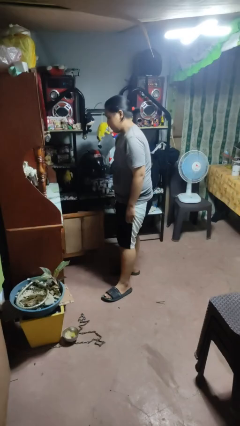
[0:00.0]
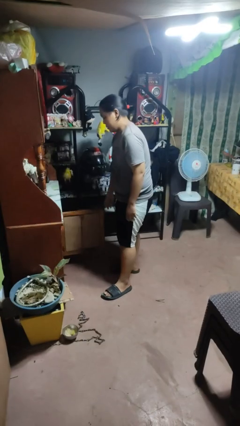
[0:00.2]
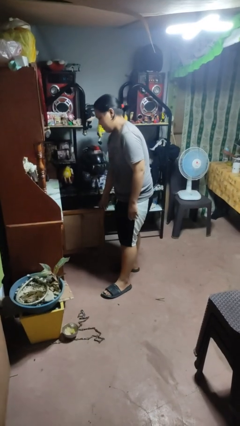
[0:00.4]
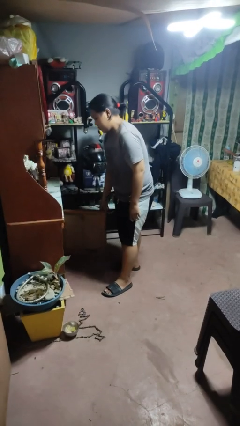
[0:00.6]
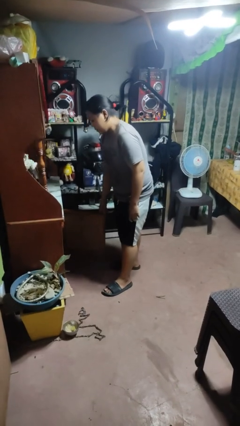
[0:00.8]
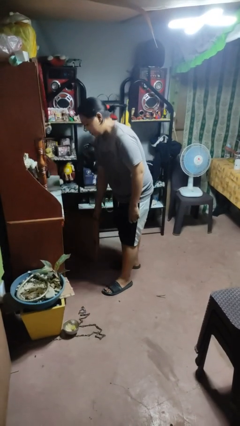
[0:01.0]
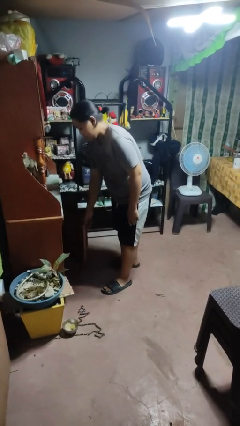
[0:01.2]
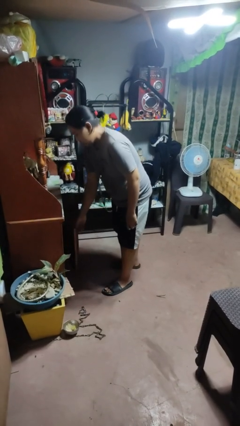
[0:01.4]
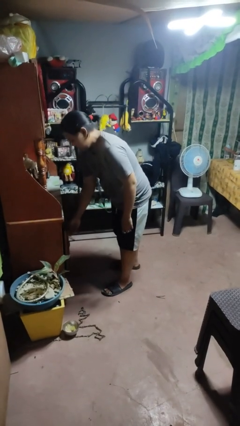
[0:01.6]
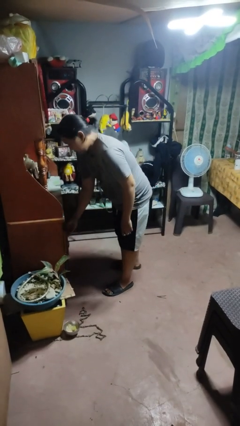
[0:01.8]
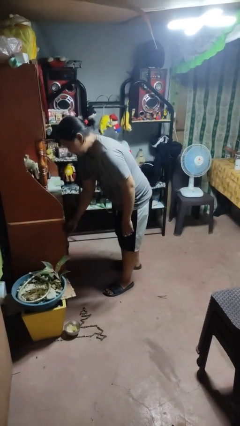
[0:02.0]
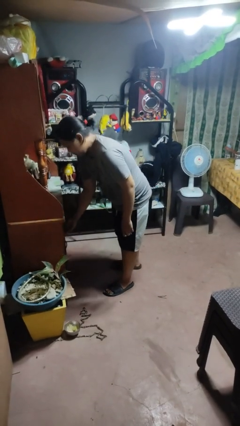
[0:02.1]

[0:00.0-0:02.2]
person closes cabinet

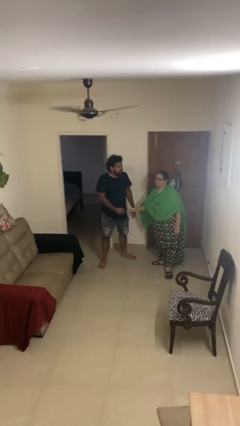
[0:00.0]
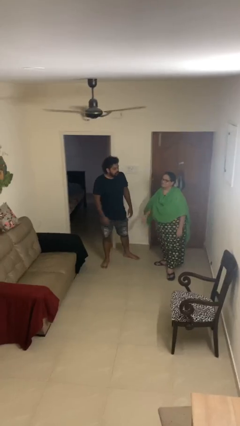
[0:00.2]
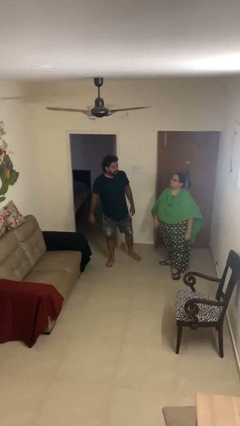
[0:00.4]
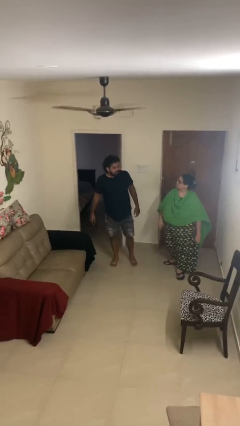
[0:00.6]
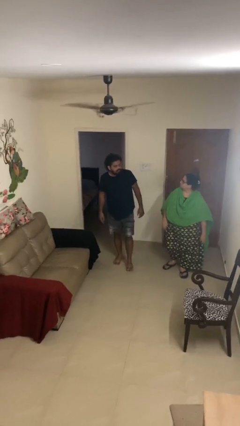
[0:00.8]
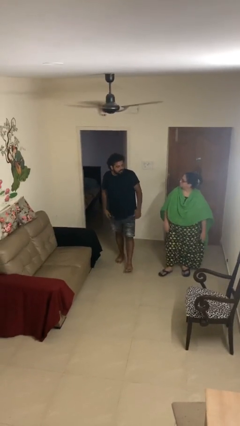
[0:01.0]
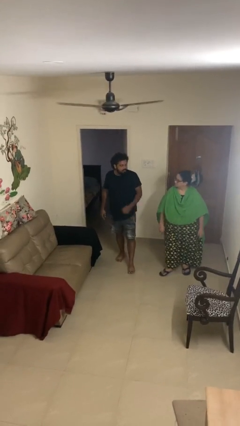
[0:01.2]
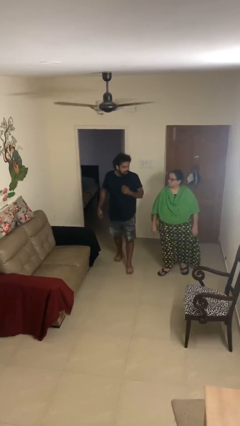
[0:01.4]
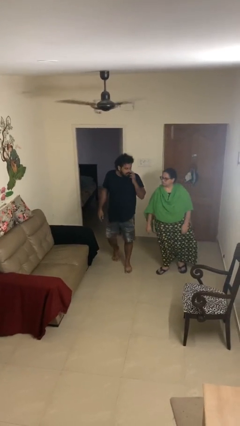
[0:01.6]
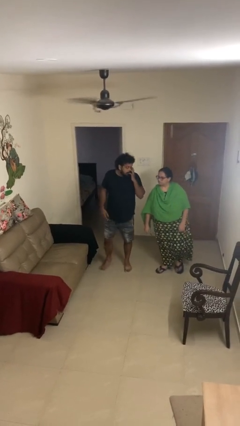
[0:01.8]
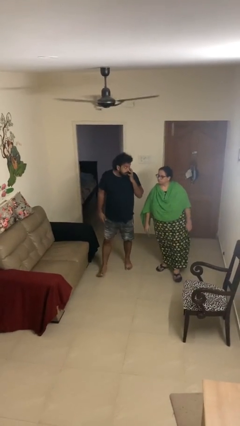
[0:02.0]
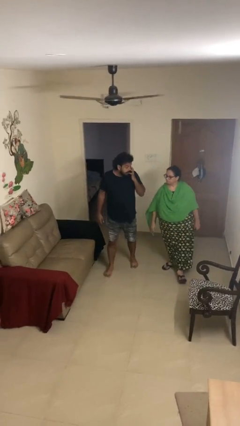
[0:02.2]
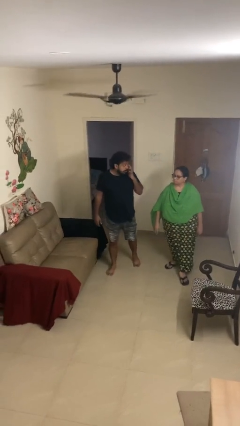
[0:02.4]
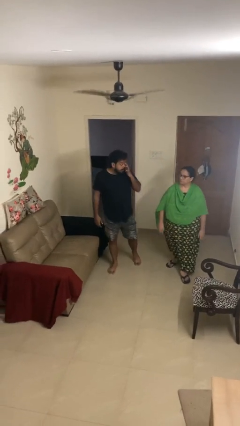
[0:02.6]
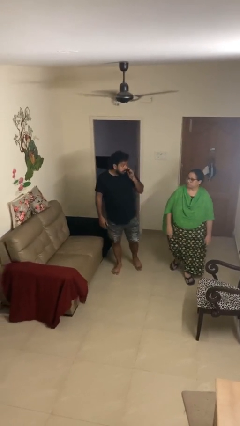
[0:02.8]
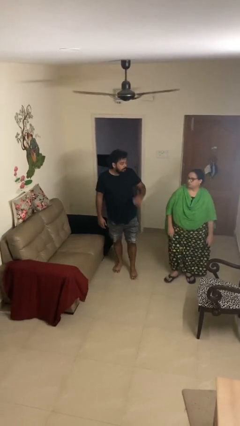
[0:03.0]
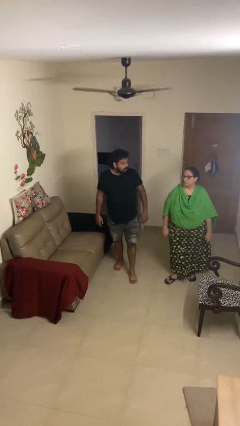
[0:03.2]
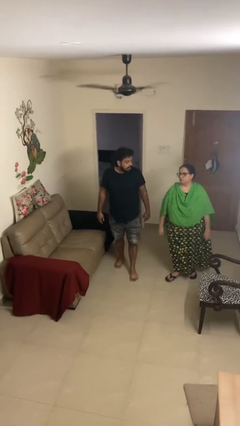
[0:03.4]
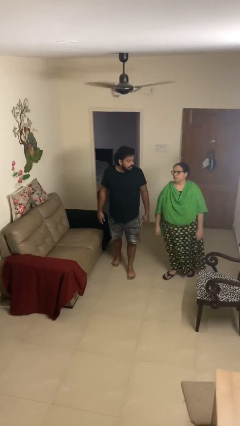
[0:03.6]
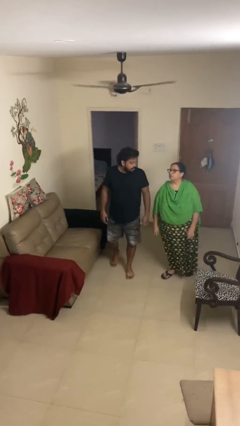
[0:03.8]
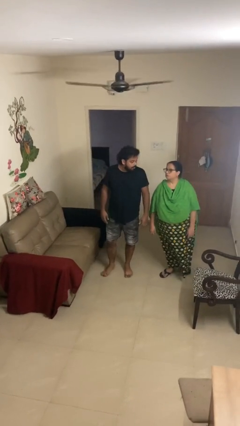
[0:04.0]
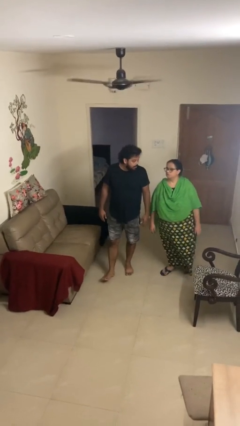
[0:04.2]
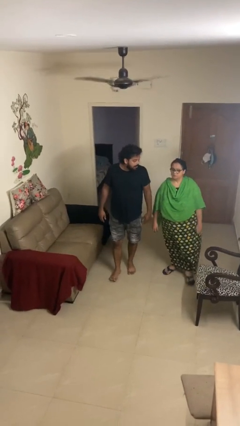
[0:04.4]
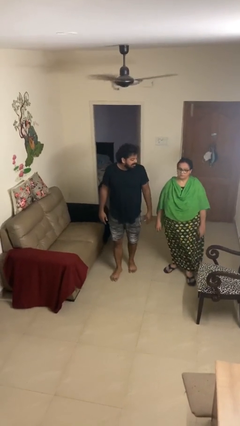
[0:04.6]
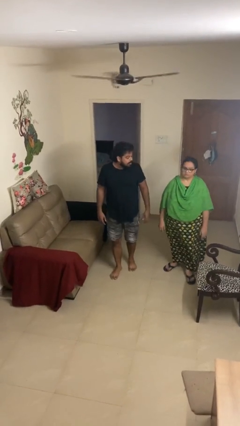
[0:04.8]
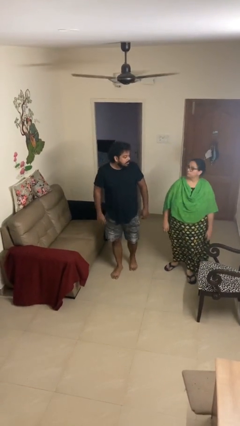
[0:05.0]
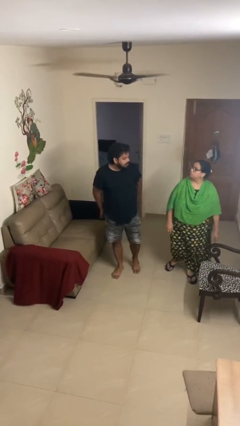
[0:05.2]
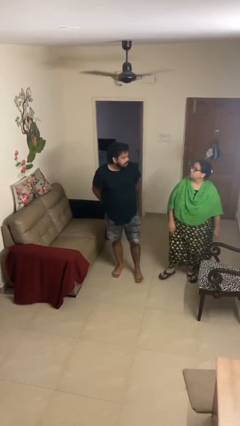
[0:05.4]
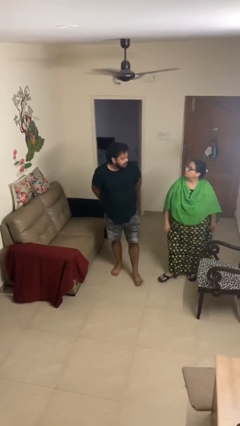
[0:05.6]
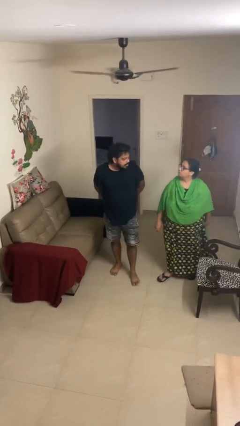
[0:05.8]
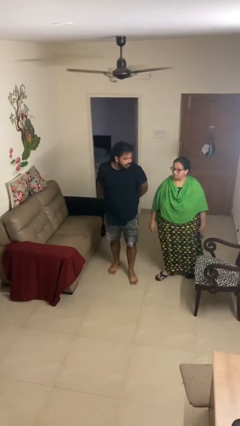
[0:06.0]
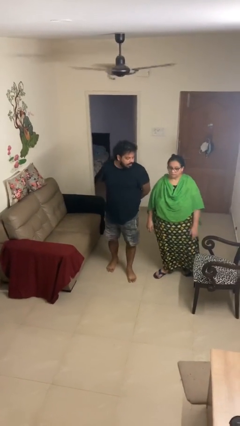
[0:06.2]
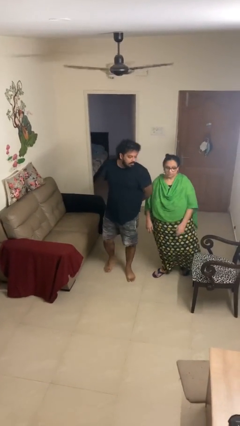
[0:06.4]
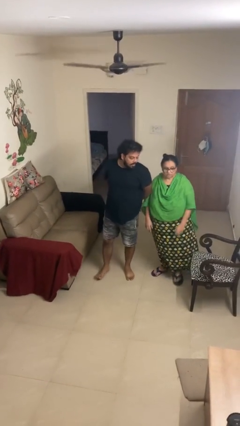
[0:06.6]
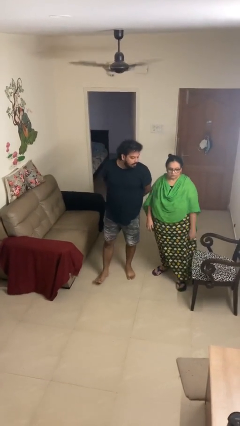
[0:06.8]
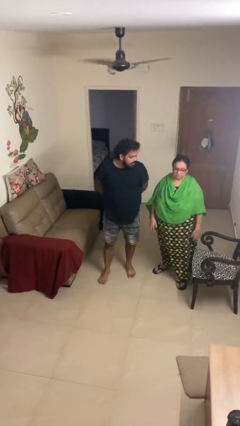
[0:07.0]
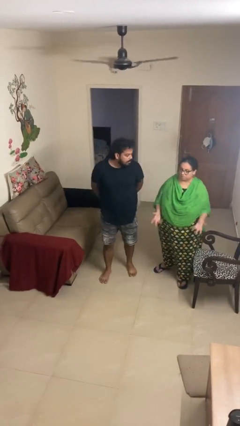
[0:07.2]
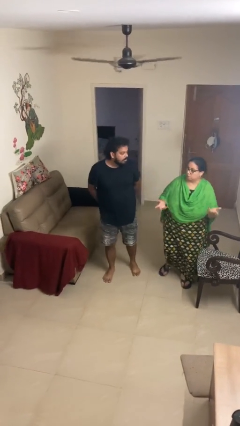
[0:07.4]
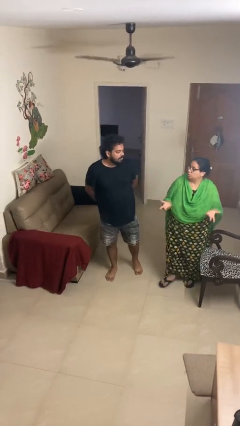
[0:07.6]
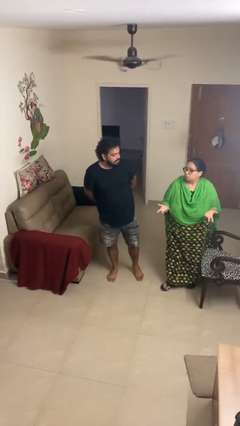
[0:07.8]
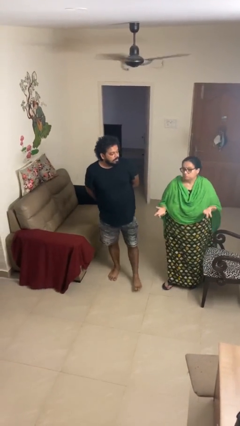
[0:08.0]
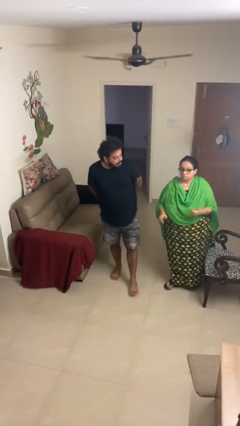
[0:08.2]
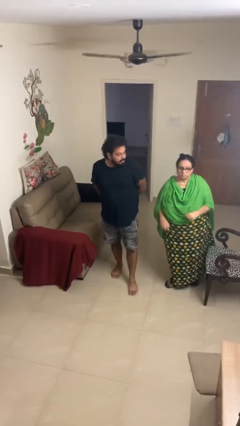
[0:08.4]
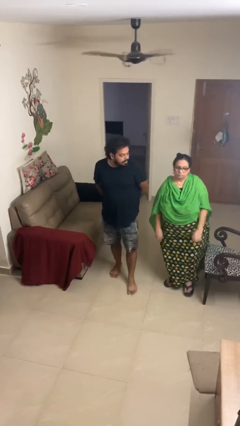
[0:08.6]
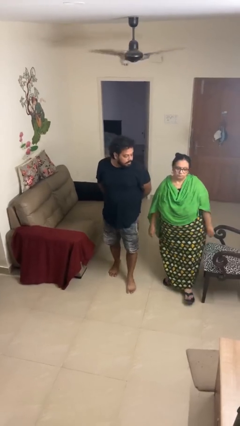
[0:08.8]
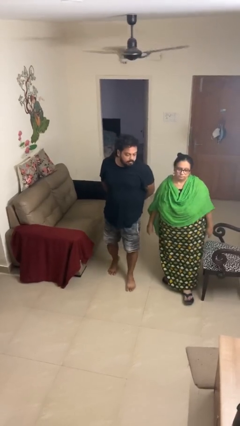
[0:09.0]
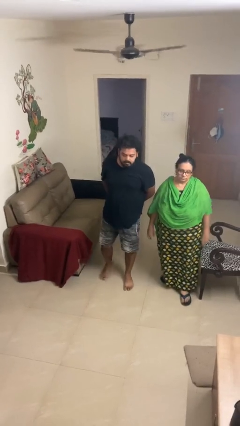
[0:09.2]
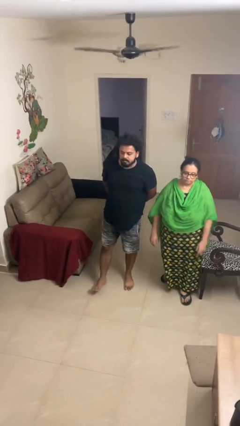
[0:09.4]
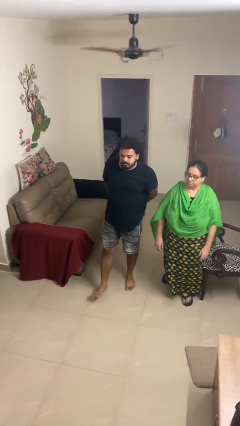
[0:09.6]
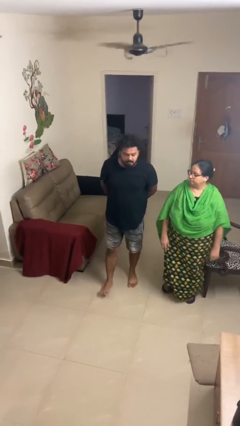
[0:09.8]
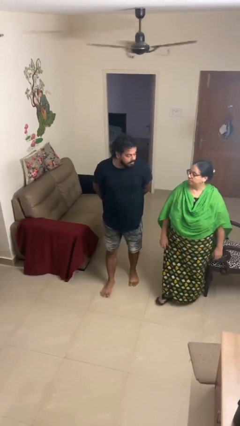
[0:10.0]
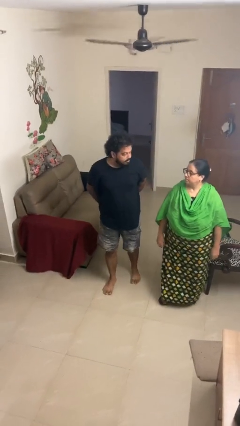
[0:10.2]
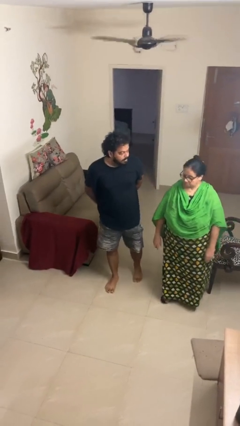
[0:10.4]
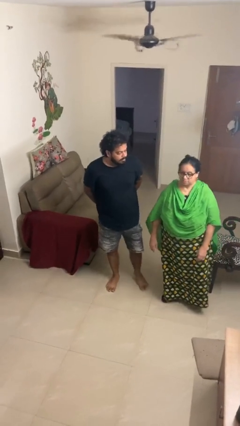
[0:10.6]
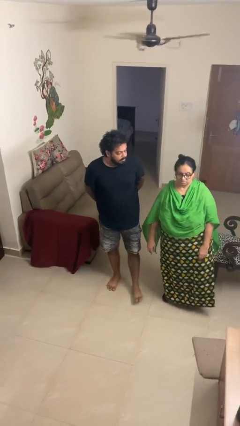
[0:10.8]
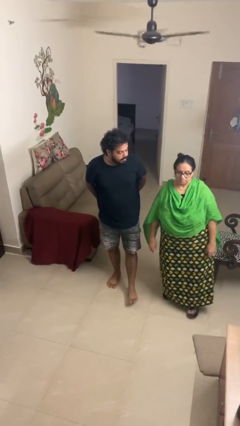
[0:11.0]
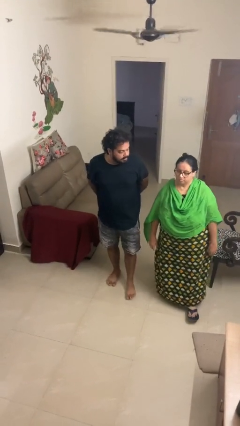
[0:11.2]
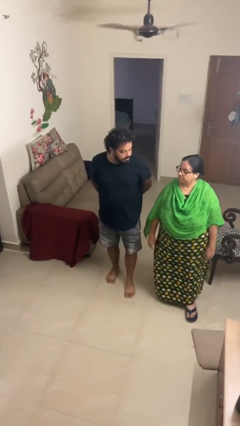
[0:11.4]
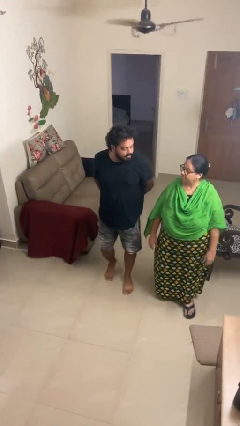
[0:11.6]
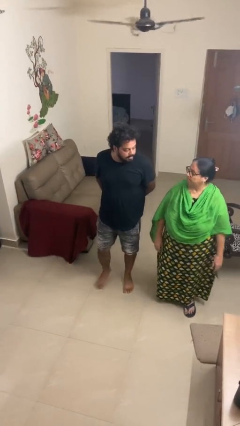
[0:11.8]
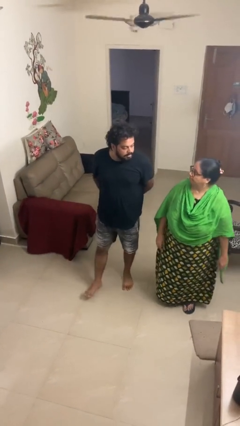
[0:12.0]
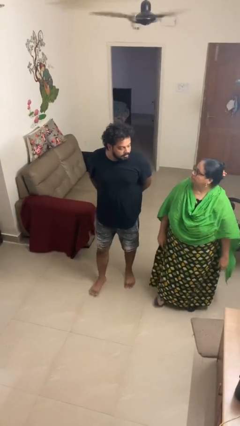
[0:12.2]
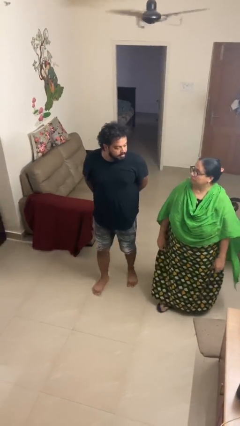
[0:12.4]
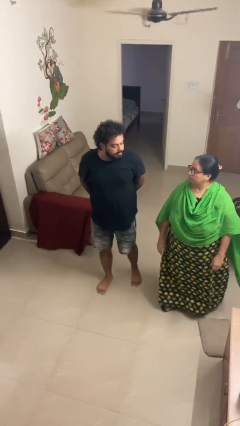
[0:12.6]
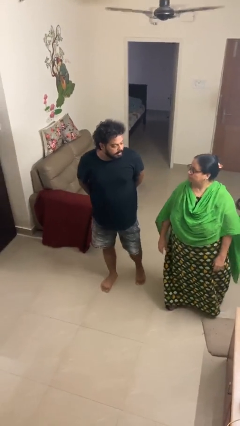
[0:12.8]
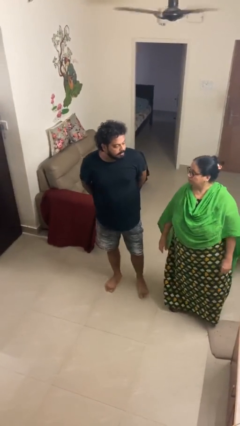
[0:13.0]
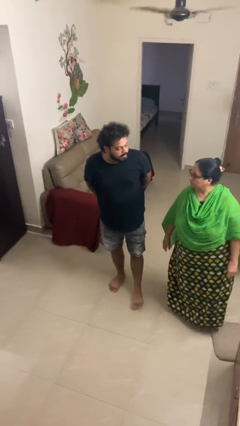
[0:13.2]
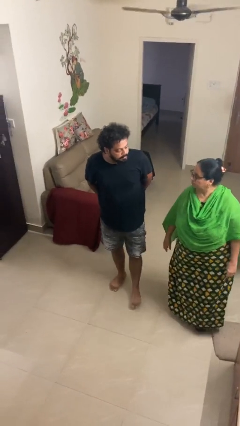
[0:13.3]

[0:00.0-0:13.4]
person talks to person

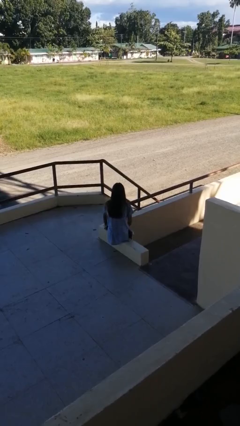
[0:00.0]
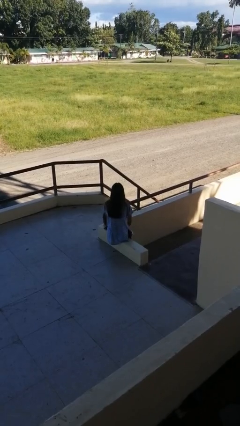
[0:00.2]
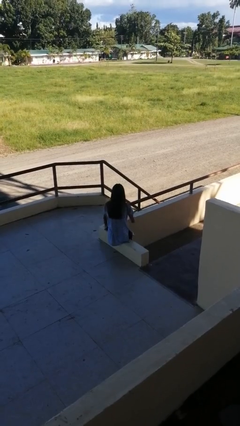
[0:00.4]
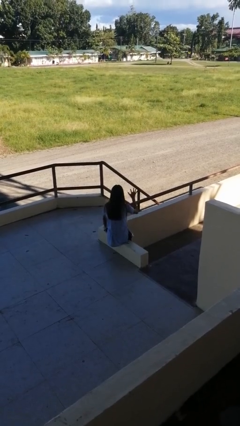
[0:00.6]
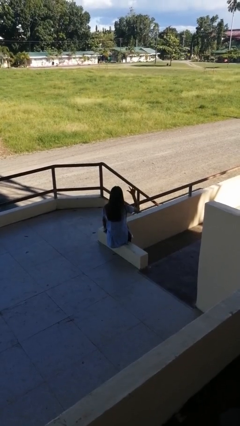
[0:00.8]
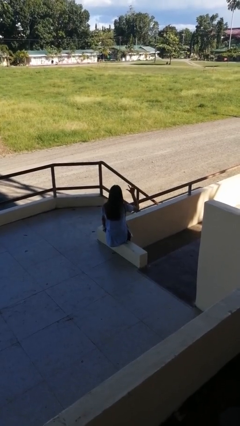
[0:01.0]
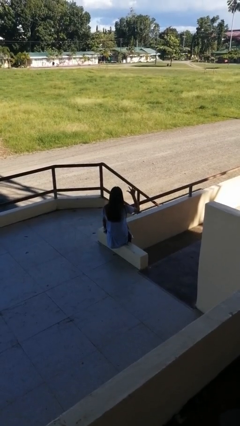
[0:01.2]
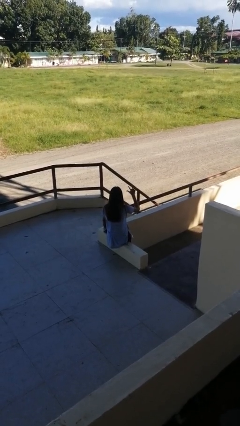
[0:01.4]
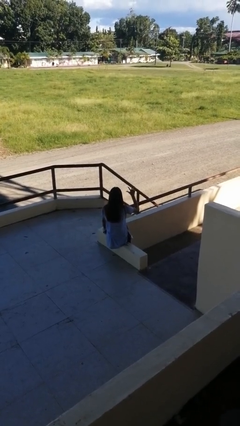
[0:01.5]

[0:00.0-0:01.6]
person gestures number five

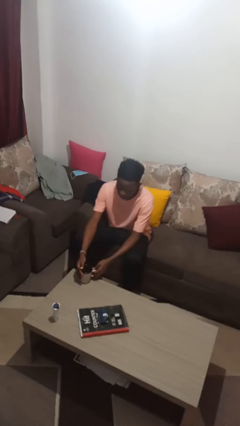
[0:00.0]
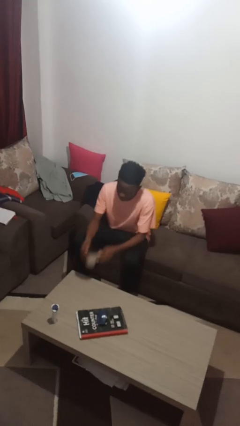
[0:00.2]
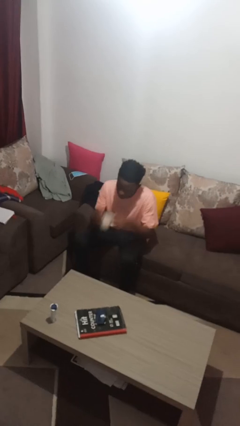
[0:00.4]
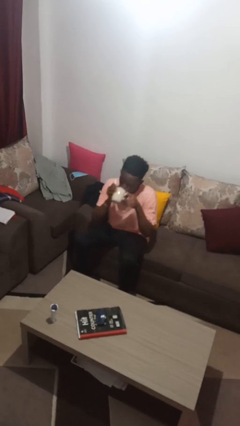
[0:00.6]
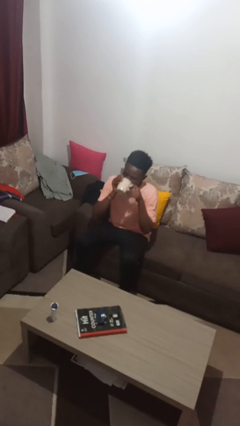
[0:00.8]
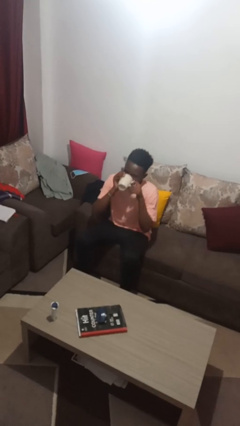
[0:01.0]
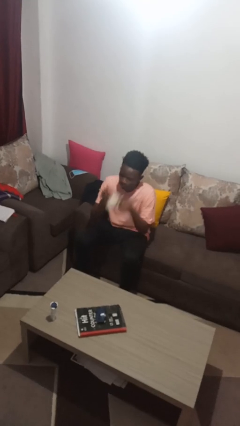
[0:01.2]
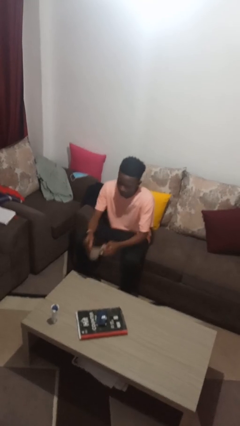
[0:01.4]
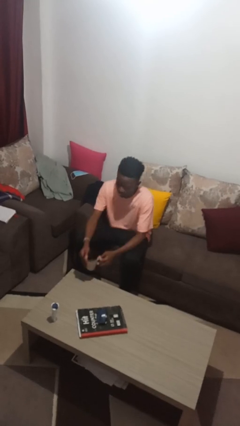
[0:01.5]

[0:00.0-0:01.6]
person drinks from mug
